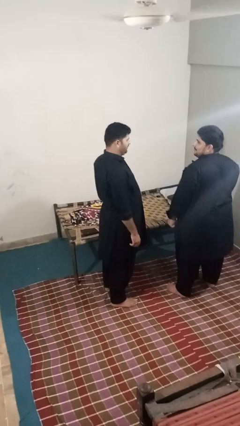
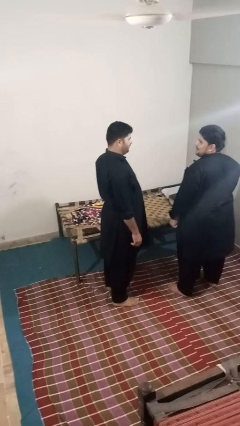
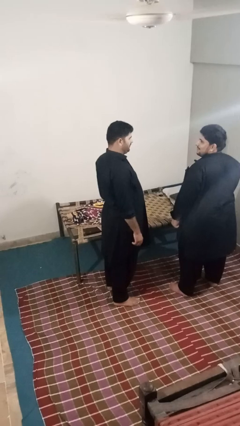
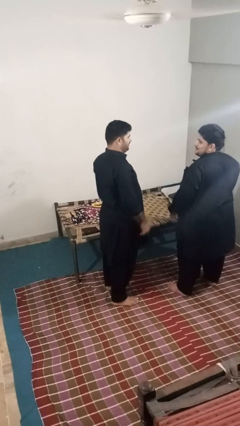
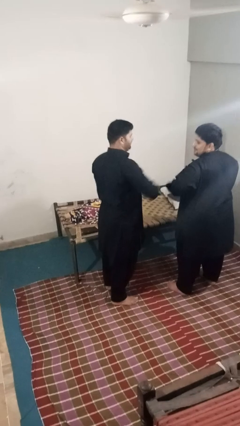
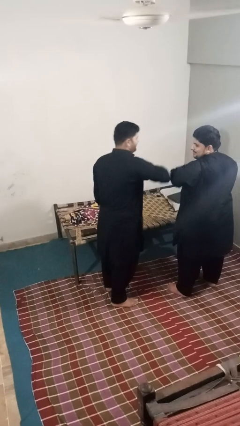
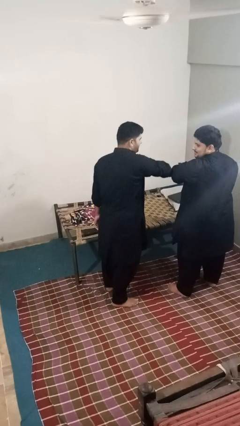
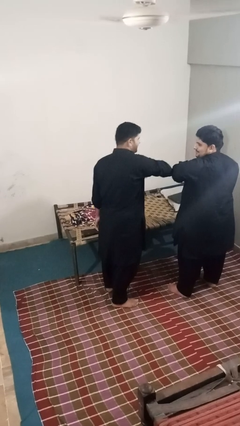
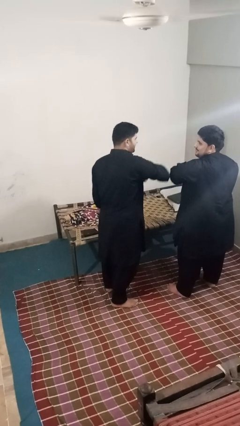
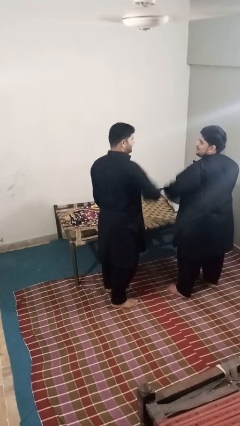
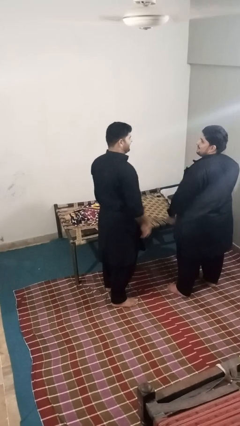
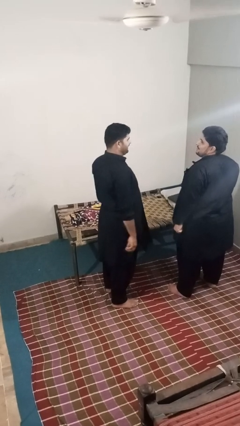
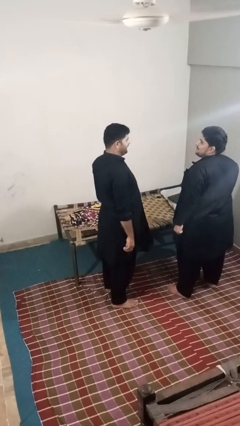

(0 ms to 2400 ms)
person nudges person with elbow

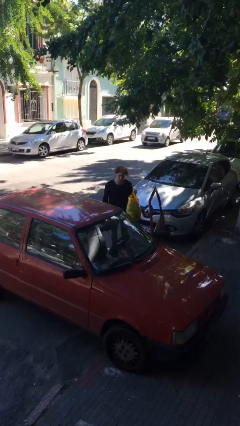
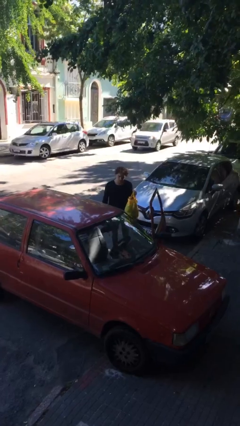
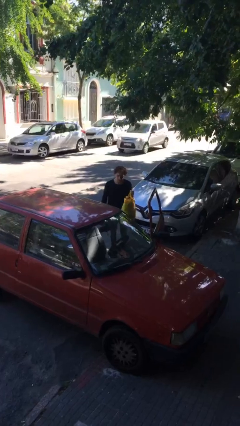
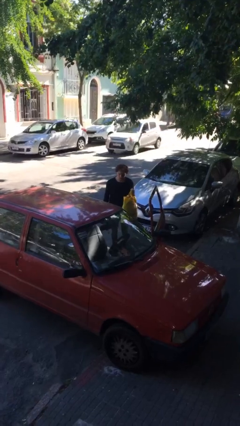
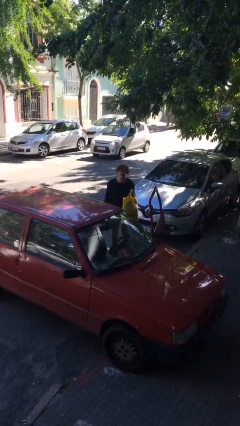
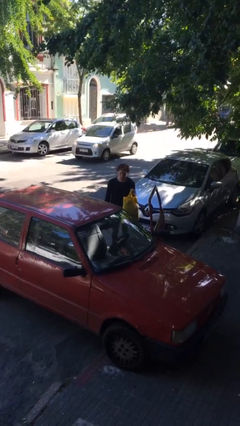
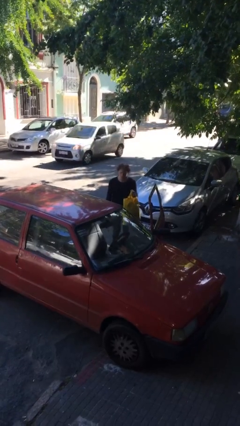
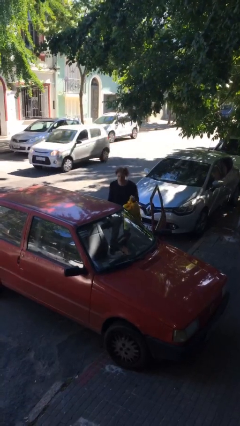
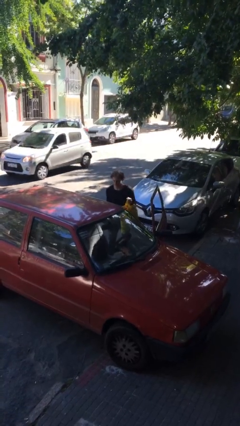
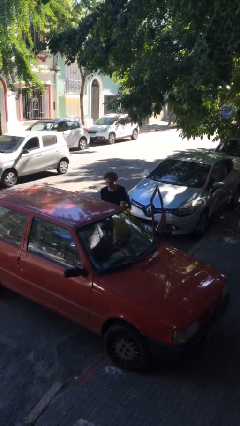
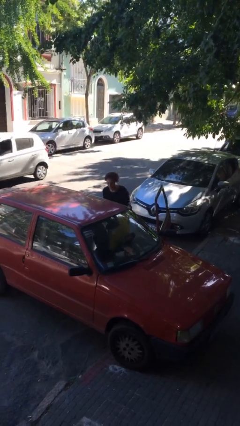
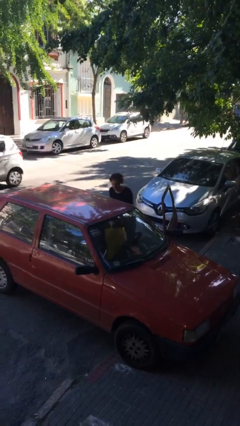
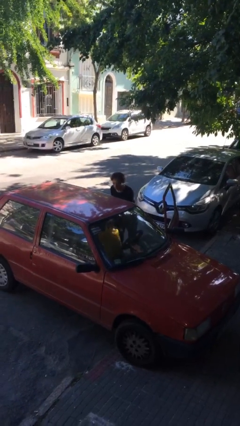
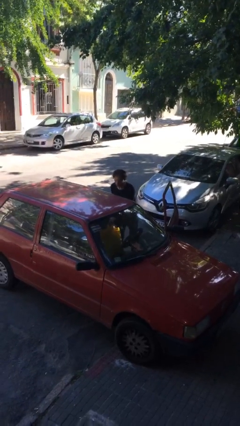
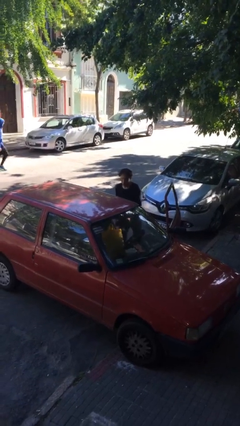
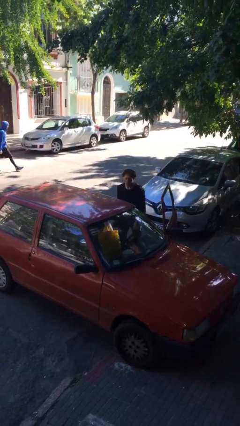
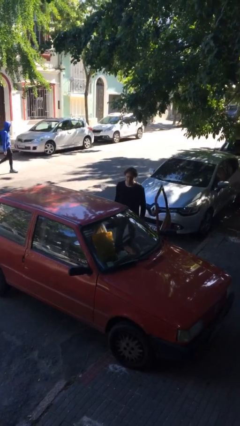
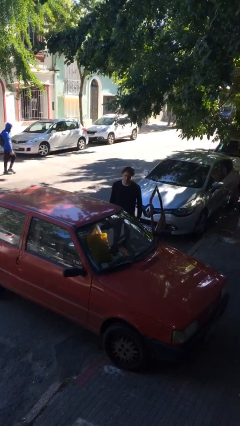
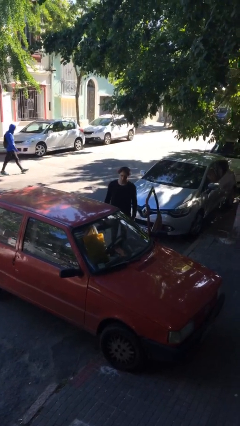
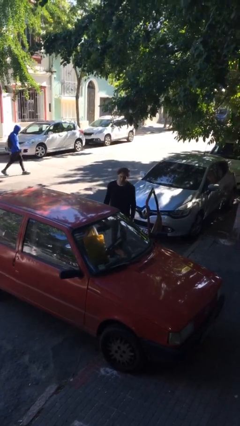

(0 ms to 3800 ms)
person loads car

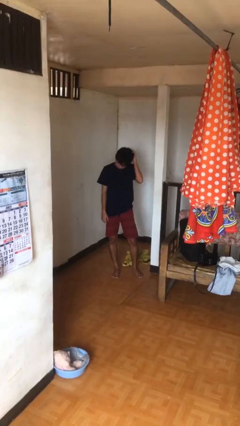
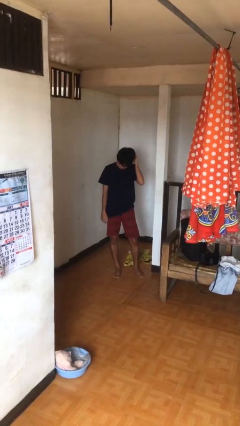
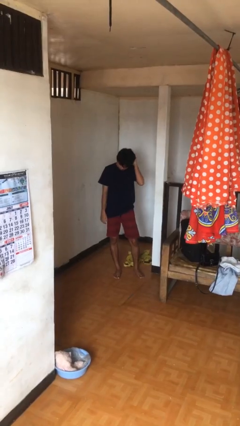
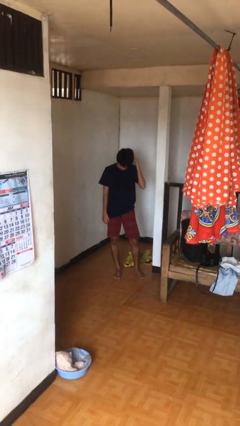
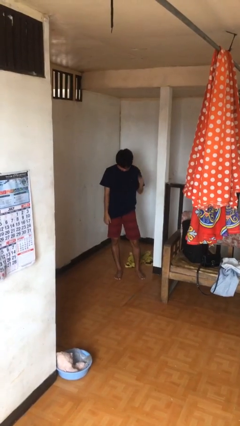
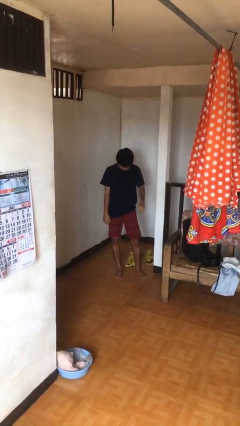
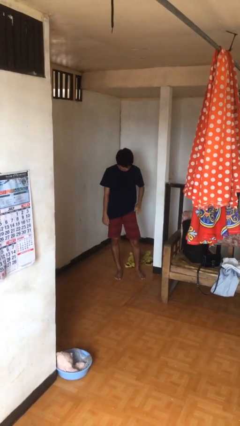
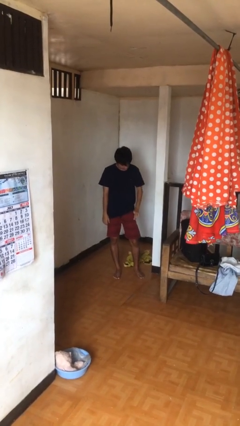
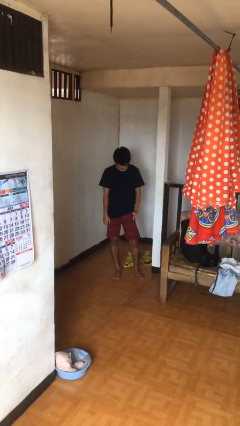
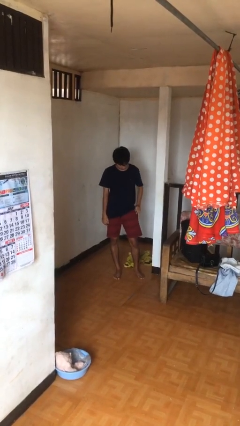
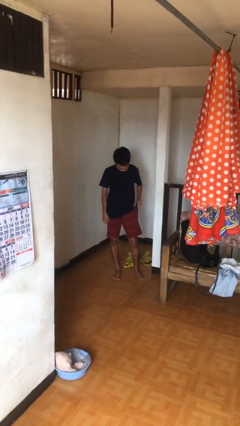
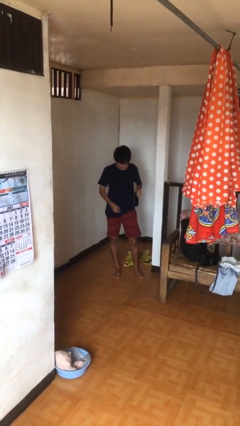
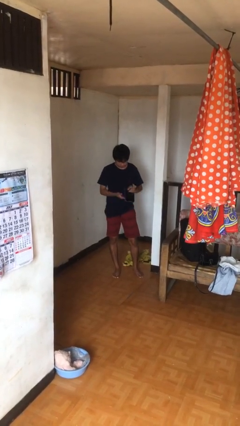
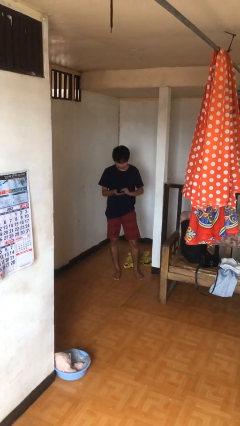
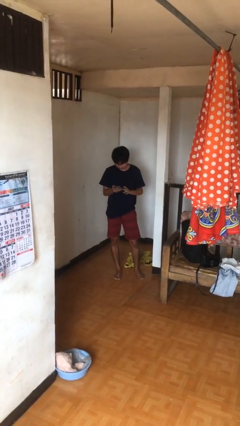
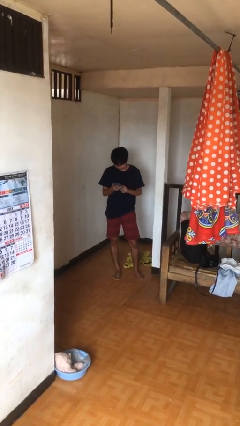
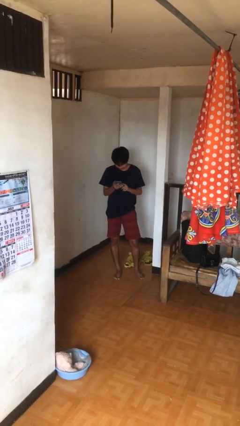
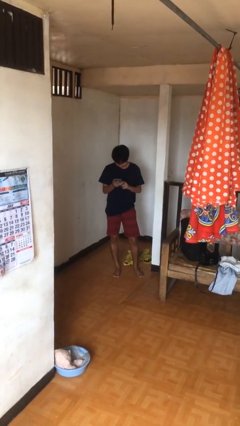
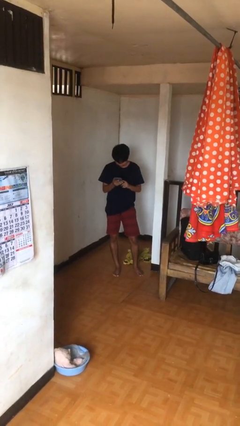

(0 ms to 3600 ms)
person takes phone from pocket

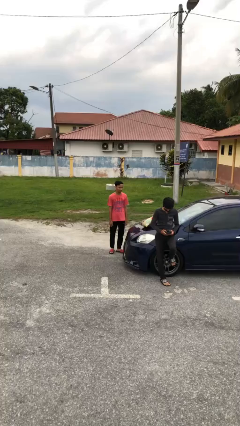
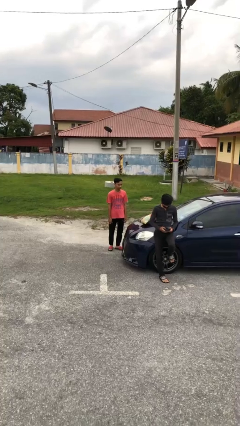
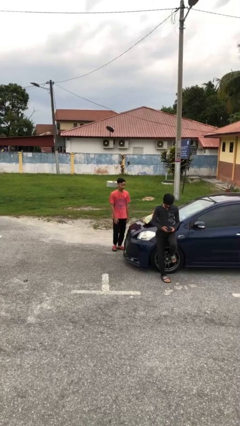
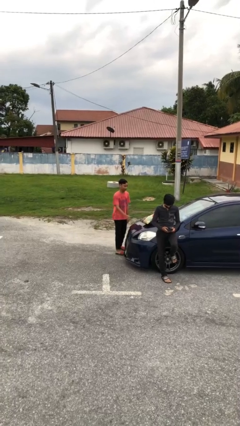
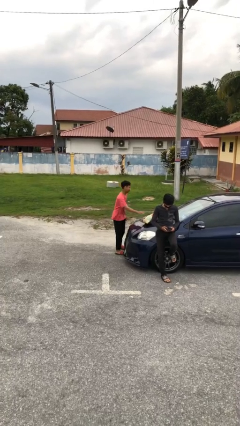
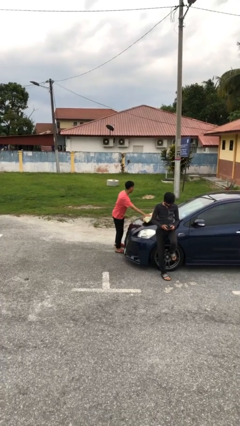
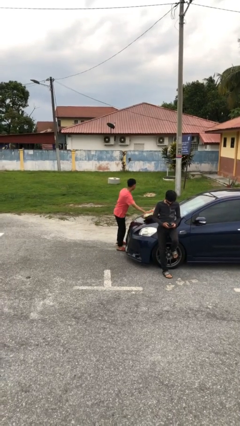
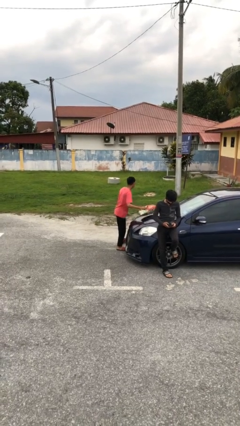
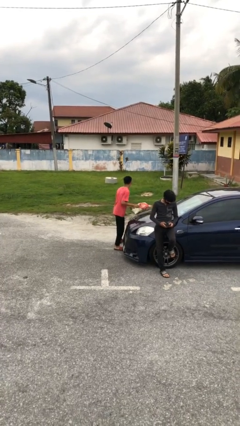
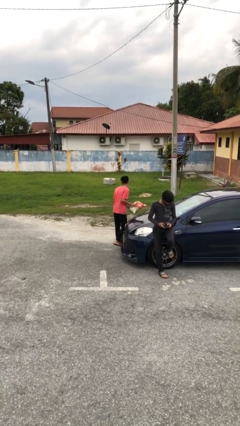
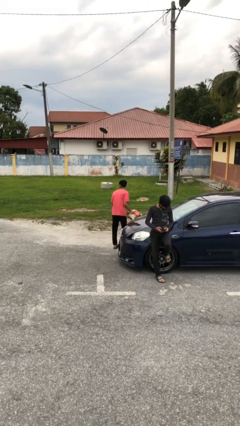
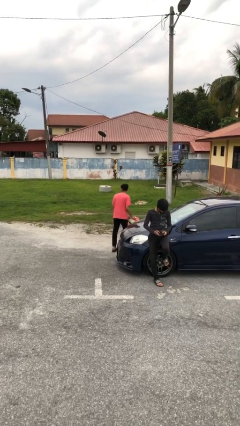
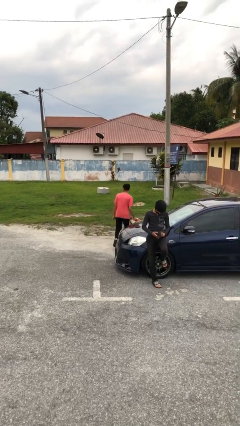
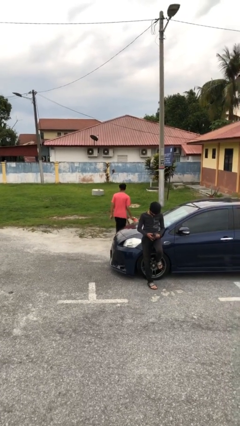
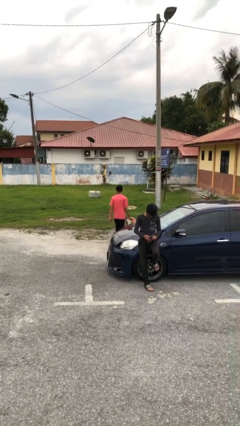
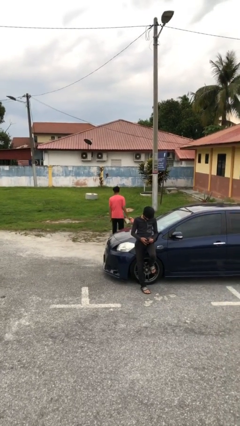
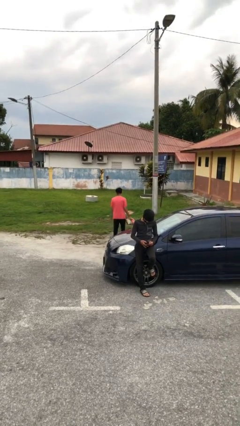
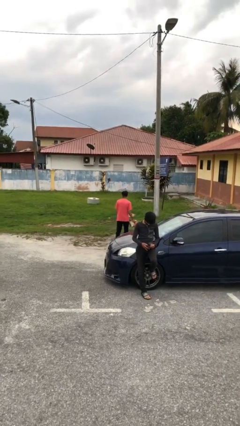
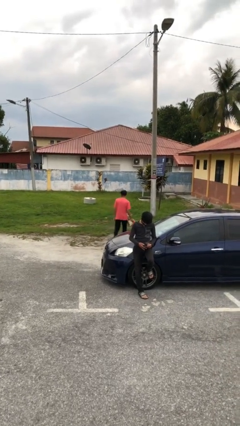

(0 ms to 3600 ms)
person steals object from person

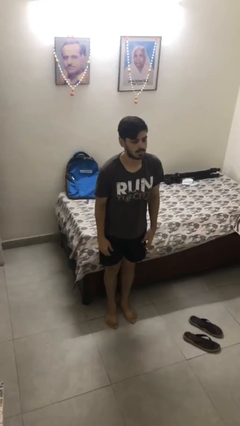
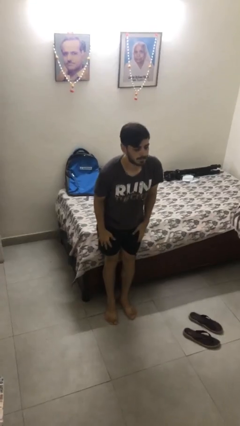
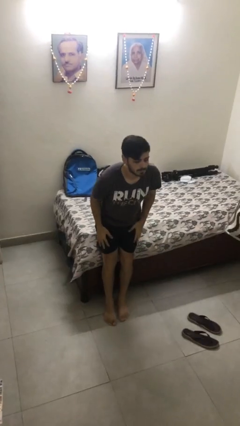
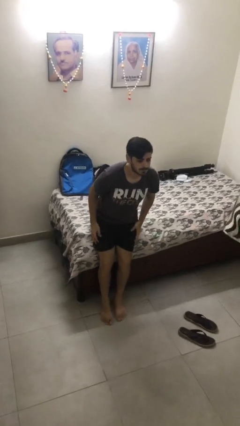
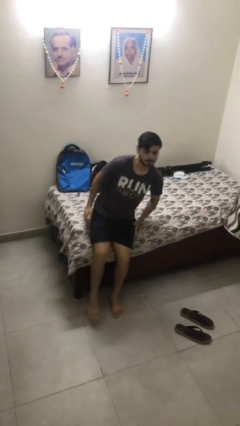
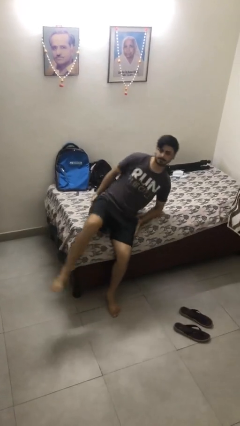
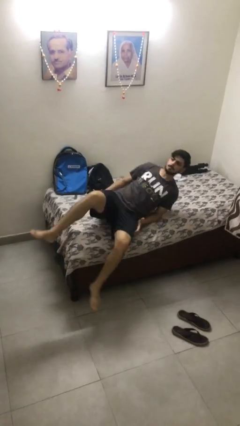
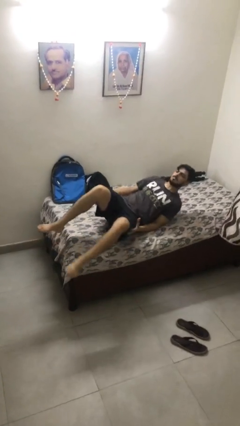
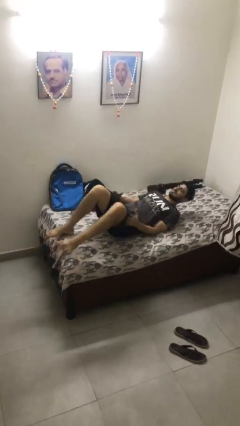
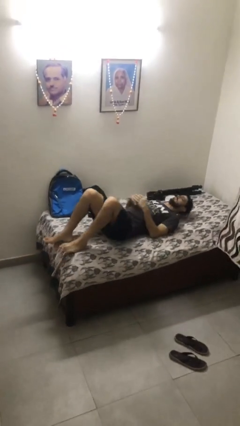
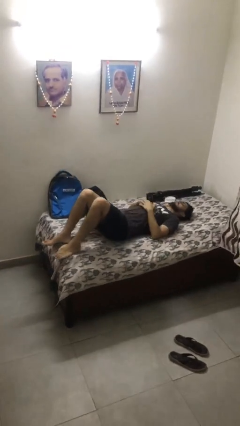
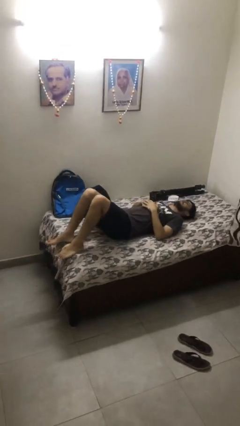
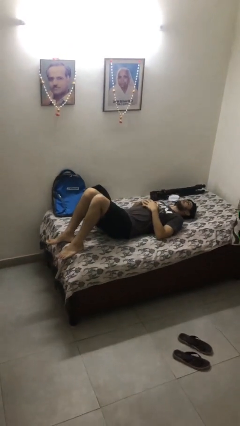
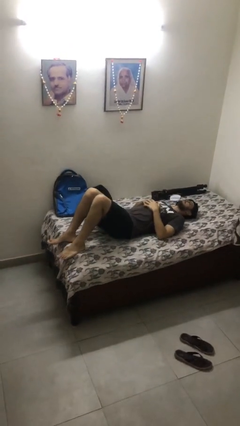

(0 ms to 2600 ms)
person lies down on bed

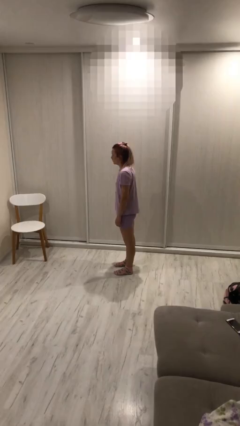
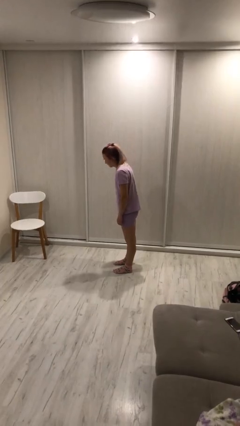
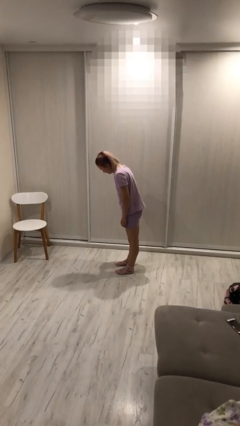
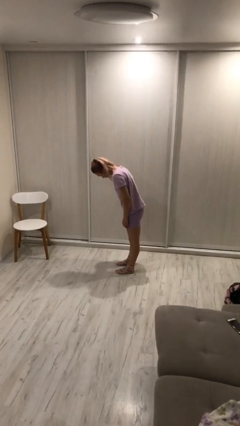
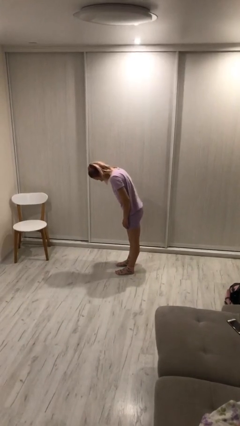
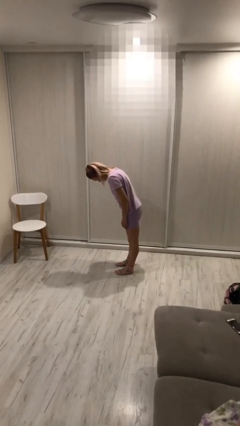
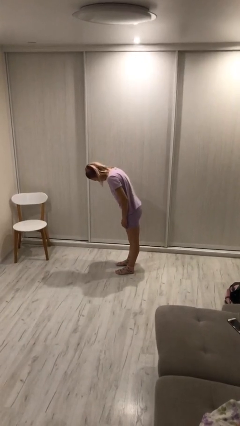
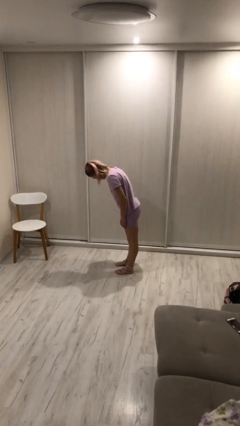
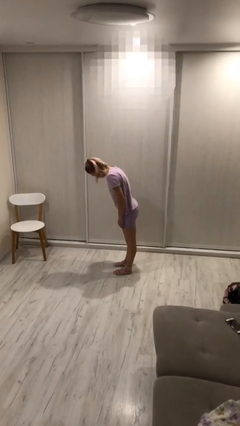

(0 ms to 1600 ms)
person bows
